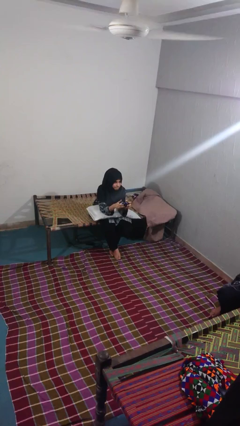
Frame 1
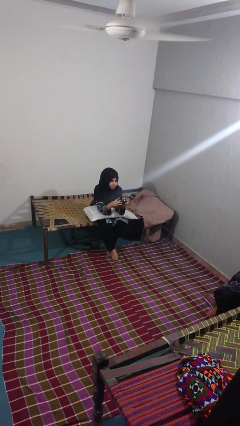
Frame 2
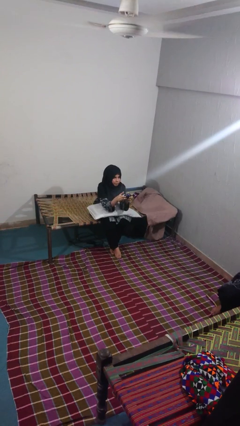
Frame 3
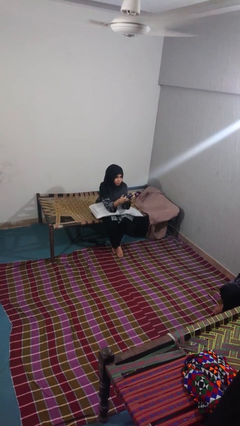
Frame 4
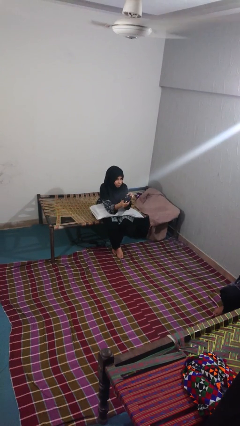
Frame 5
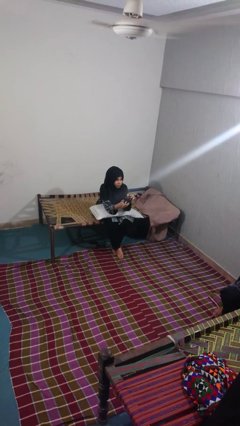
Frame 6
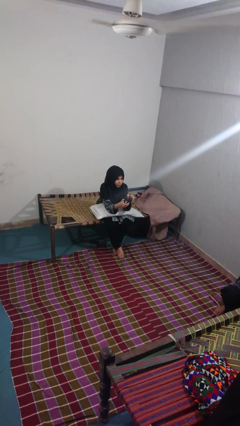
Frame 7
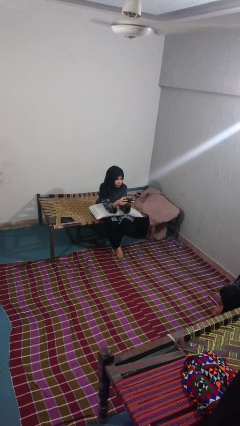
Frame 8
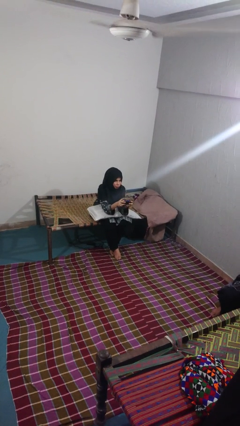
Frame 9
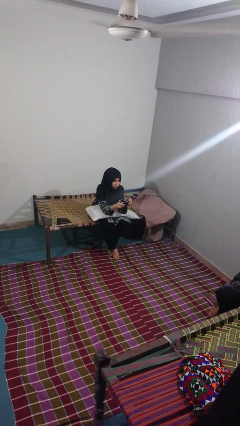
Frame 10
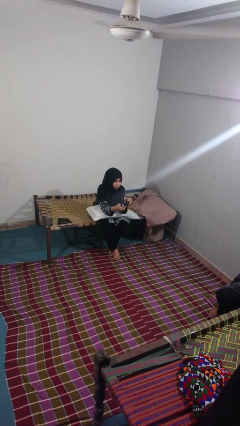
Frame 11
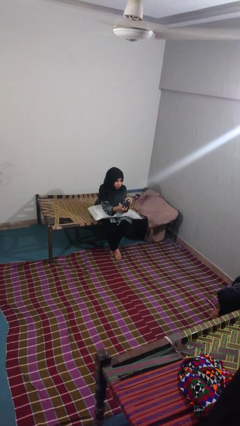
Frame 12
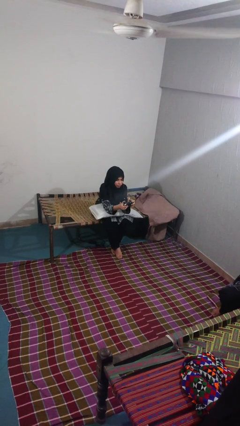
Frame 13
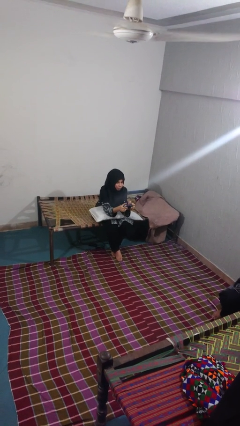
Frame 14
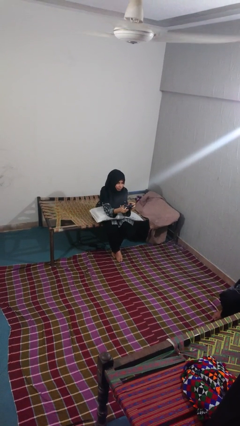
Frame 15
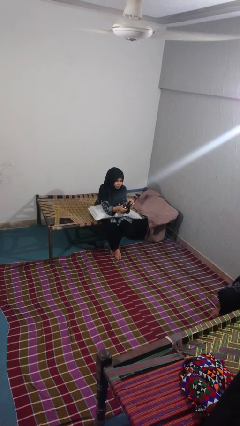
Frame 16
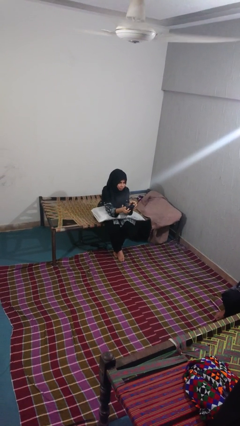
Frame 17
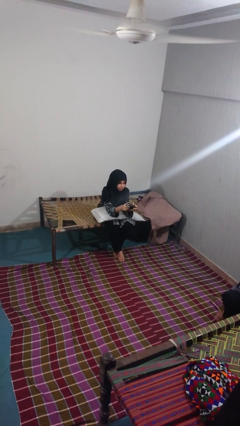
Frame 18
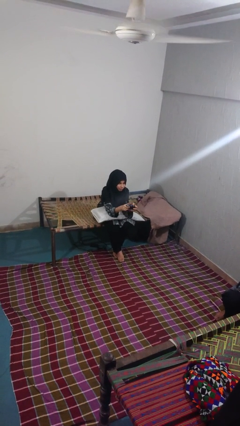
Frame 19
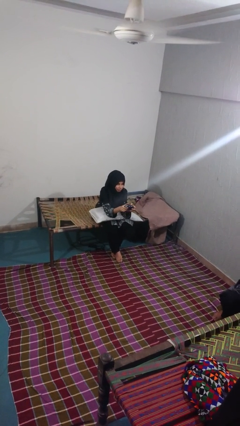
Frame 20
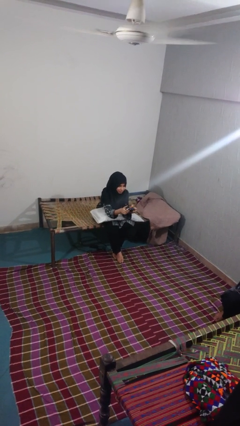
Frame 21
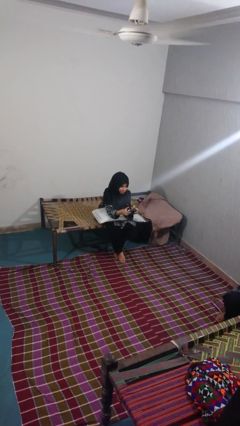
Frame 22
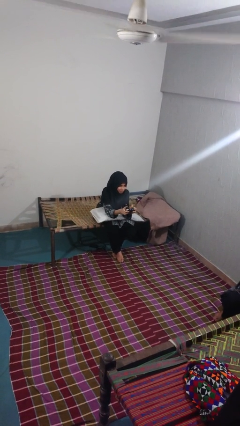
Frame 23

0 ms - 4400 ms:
person interacts with handheld game

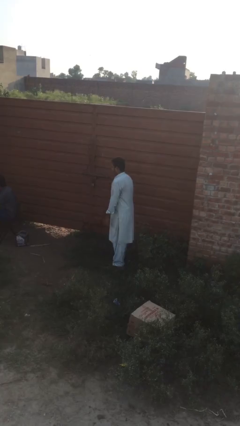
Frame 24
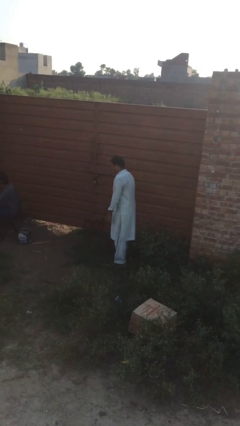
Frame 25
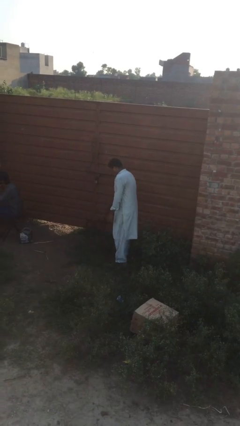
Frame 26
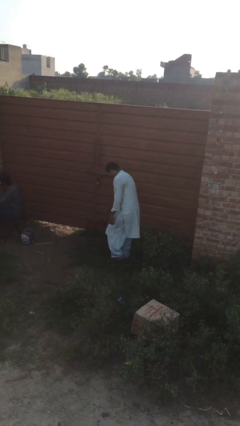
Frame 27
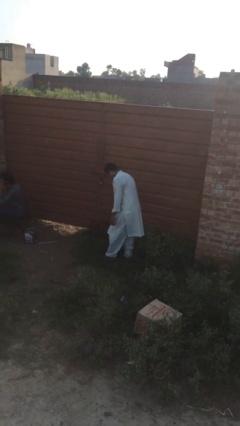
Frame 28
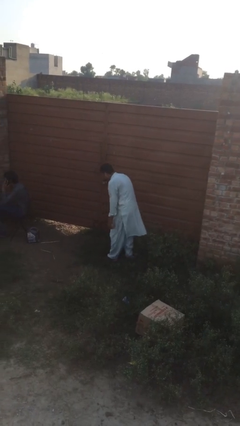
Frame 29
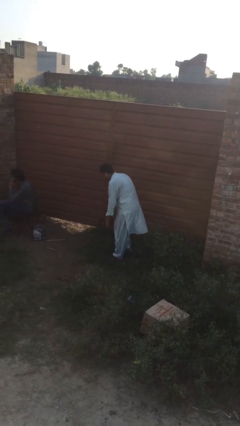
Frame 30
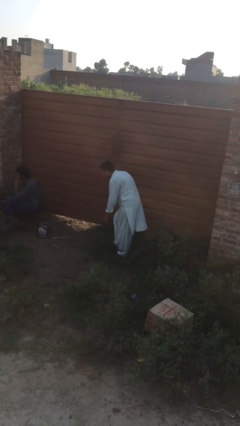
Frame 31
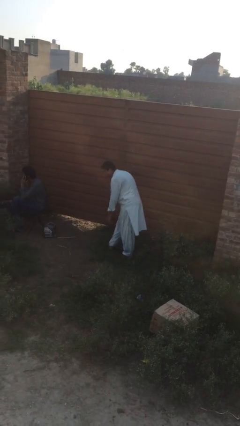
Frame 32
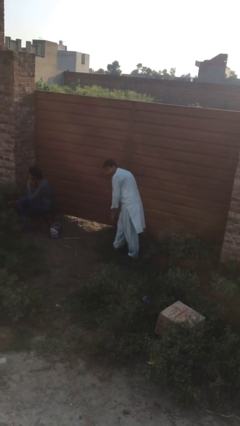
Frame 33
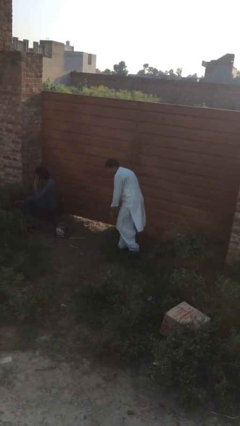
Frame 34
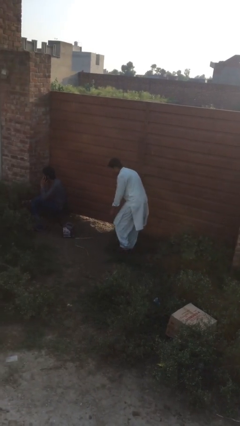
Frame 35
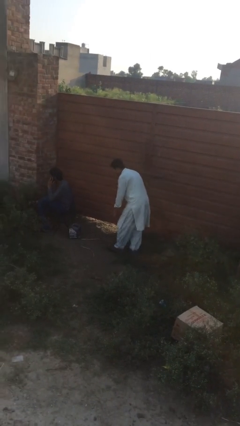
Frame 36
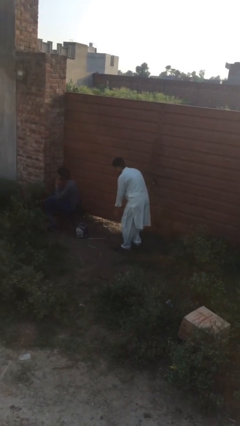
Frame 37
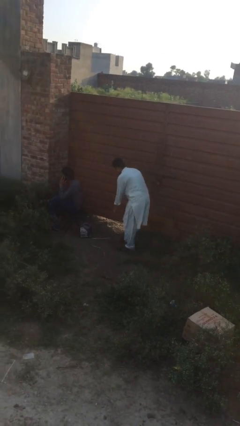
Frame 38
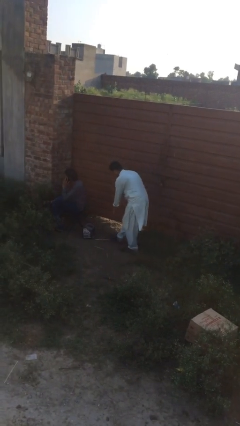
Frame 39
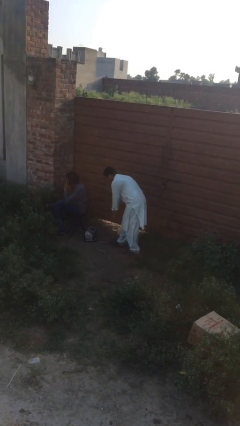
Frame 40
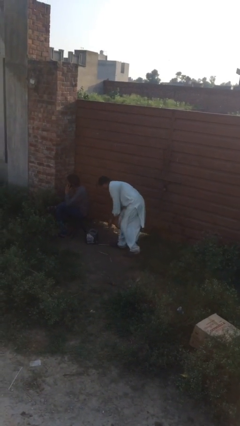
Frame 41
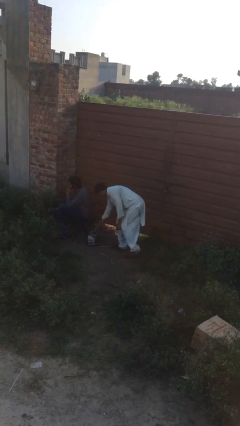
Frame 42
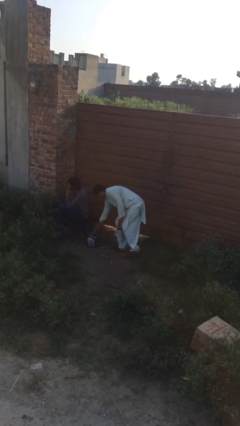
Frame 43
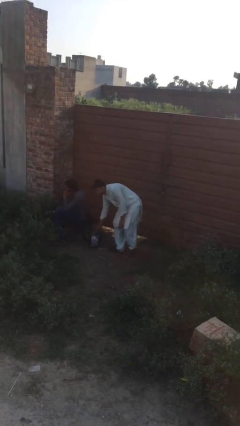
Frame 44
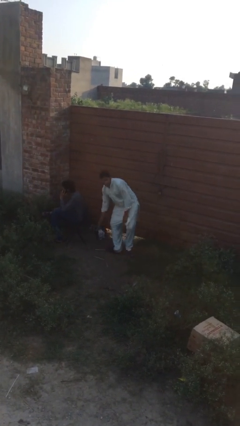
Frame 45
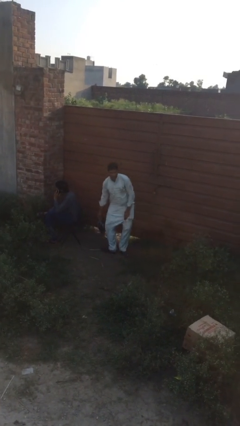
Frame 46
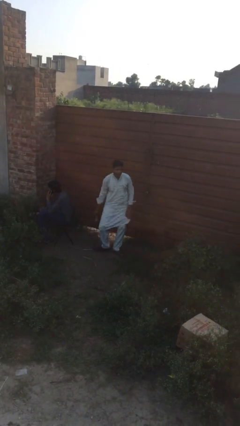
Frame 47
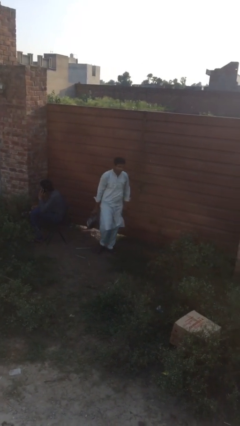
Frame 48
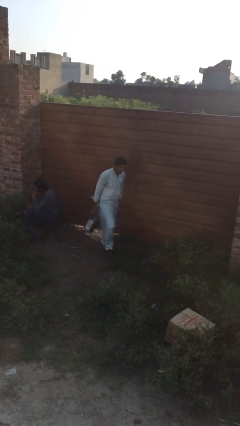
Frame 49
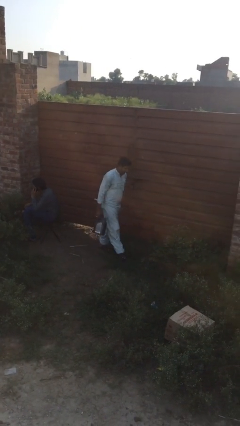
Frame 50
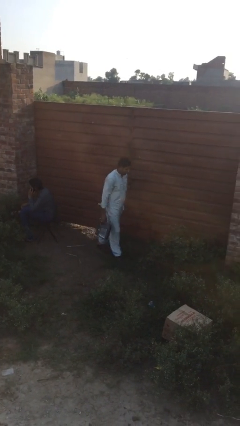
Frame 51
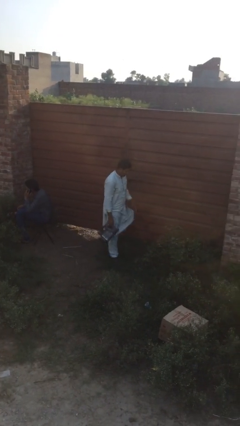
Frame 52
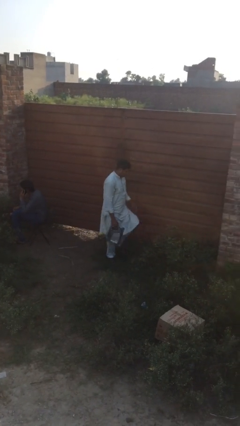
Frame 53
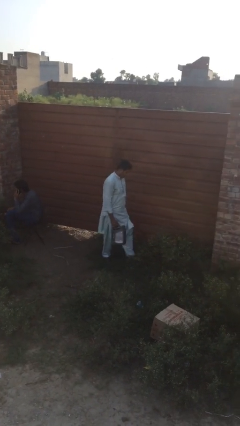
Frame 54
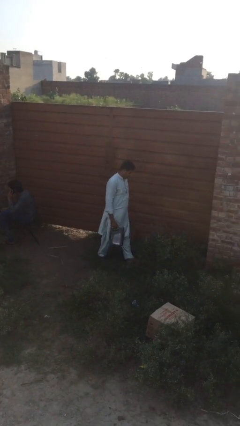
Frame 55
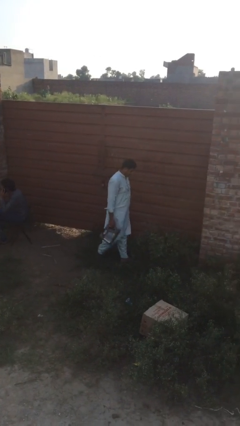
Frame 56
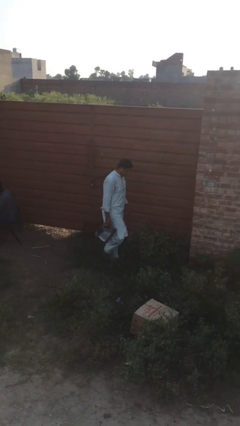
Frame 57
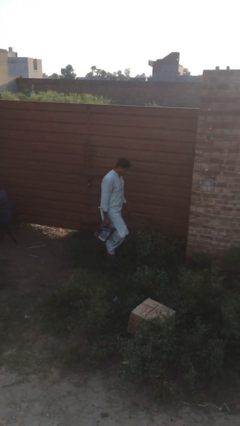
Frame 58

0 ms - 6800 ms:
person steals object from person

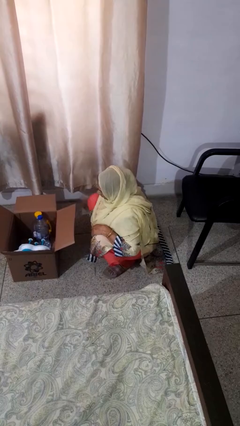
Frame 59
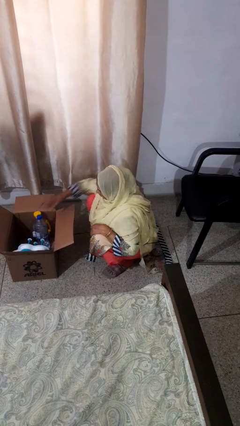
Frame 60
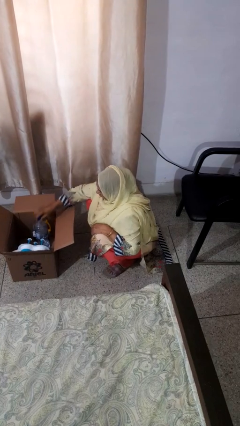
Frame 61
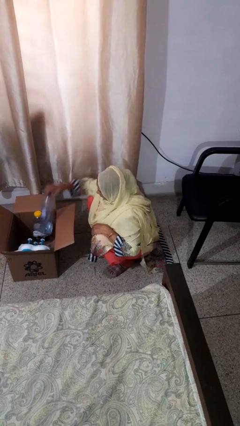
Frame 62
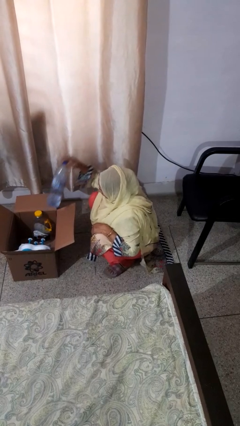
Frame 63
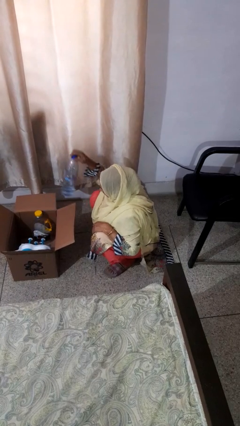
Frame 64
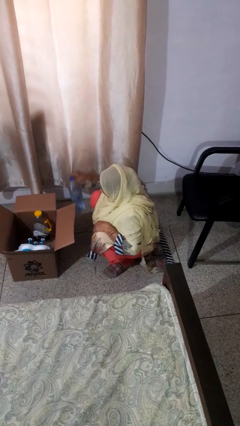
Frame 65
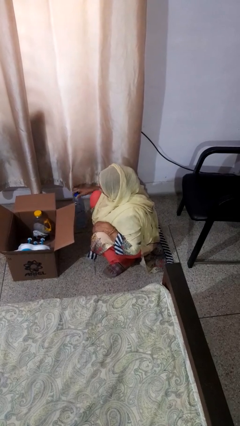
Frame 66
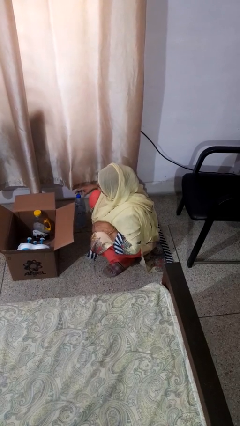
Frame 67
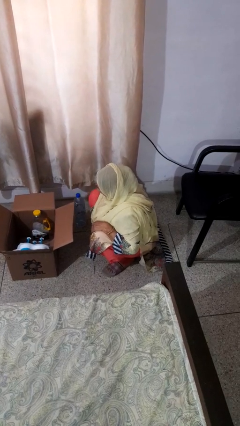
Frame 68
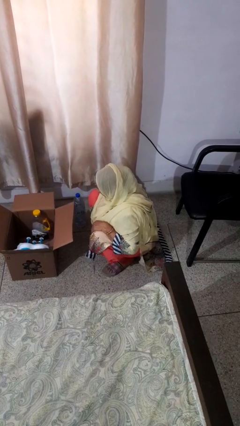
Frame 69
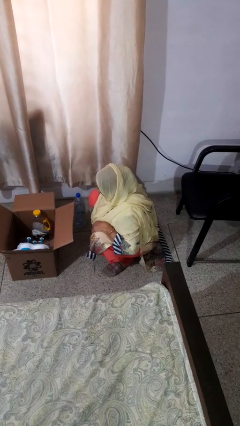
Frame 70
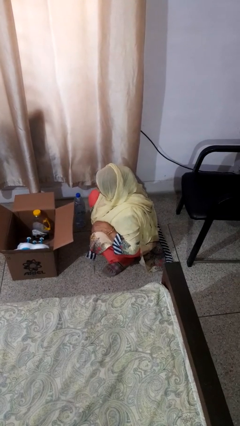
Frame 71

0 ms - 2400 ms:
person takes object from box

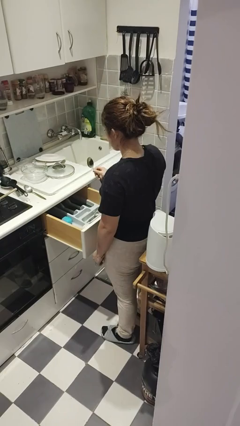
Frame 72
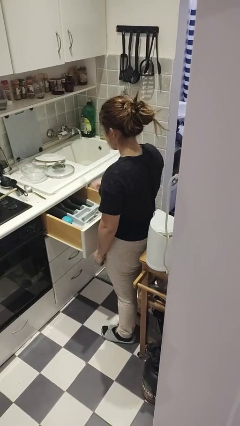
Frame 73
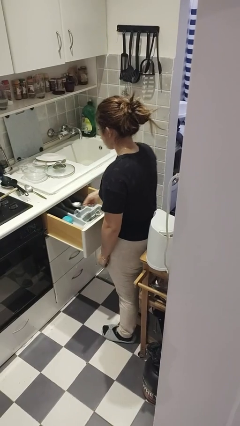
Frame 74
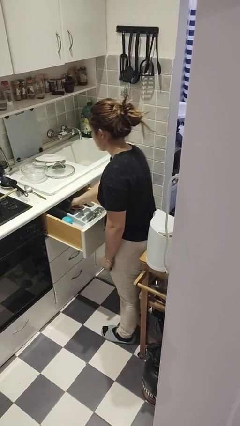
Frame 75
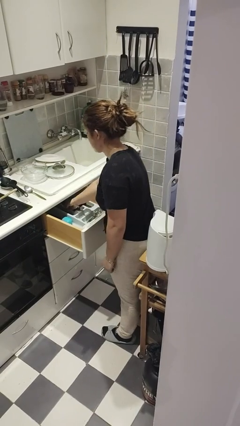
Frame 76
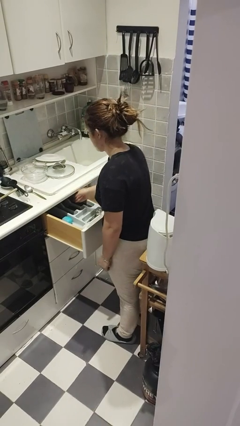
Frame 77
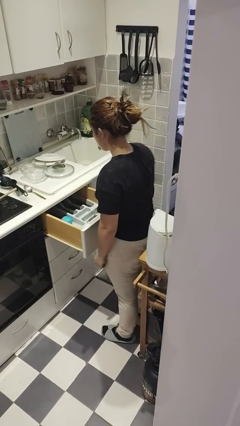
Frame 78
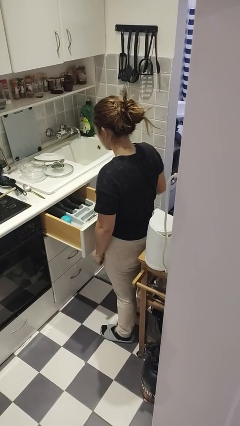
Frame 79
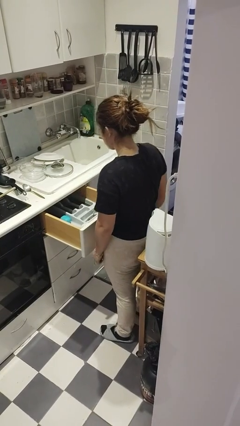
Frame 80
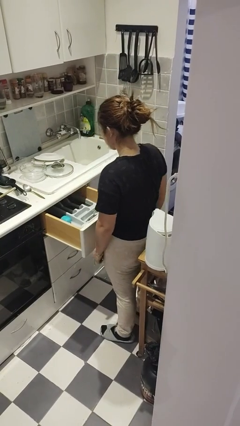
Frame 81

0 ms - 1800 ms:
person puts object into kitchen drawer

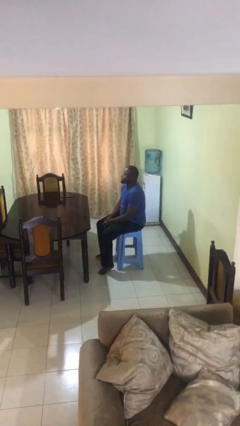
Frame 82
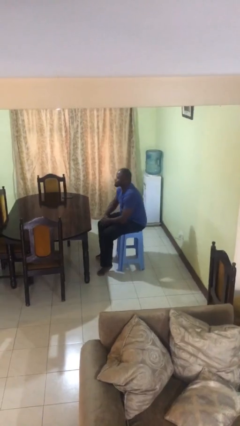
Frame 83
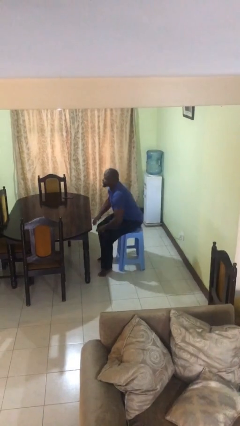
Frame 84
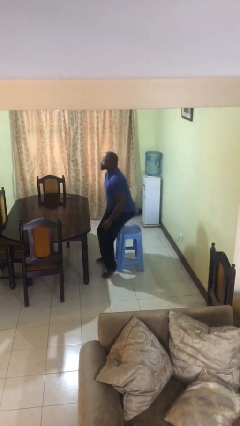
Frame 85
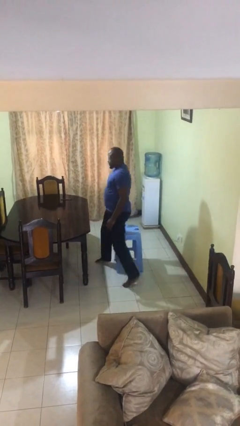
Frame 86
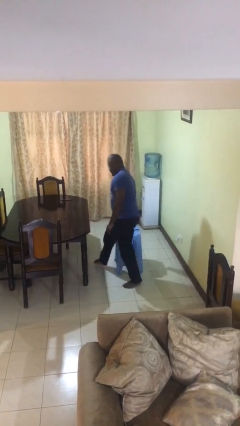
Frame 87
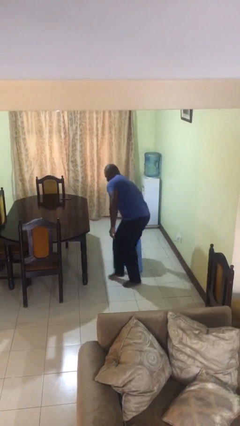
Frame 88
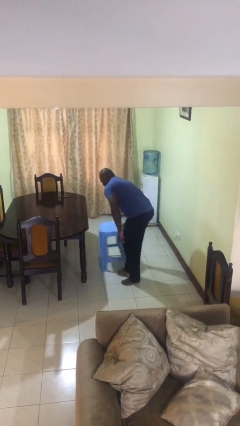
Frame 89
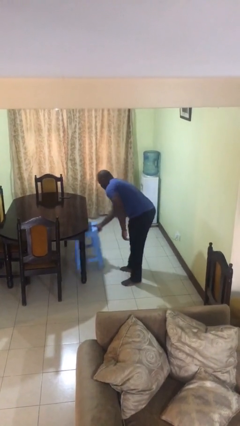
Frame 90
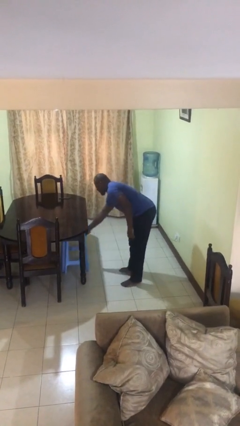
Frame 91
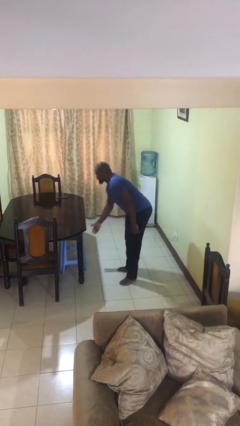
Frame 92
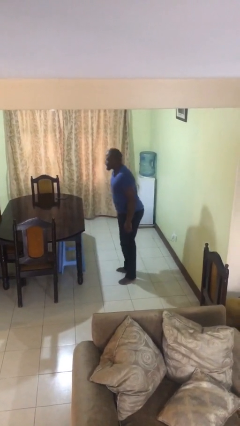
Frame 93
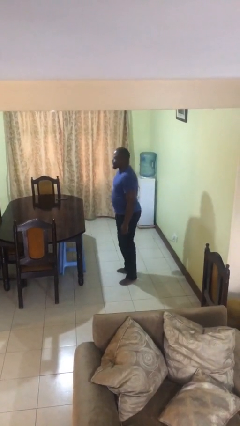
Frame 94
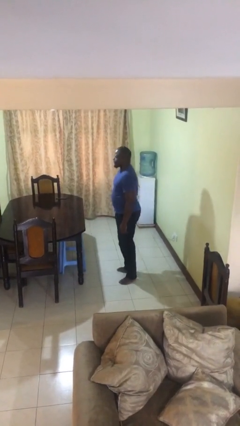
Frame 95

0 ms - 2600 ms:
person stands up
